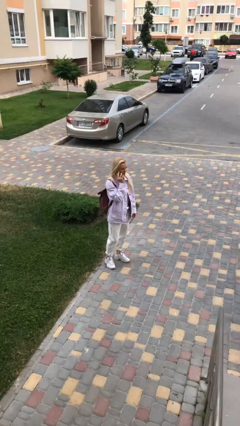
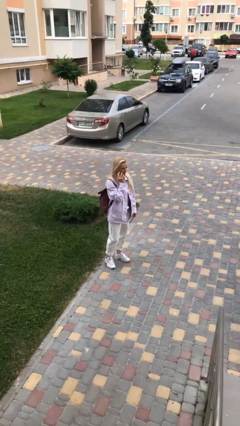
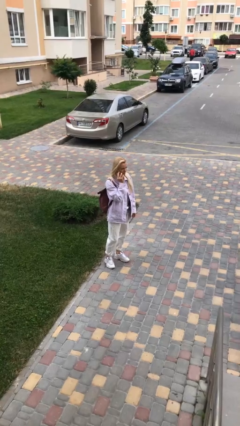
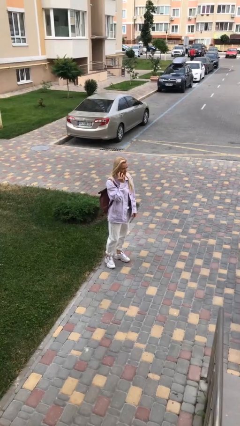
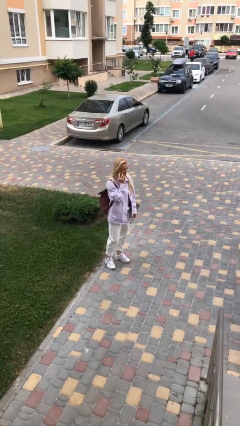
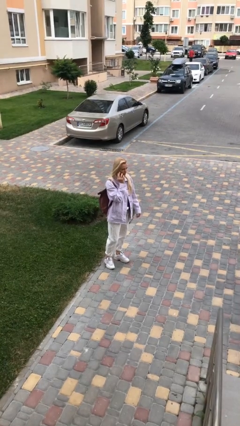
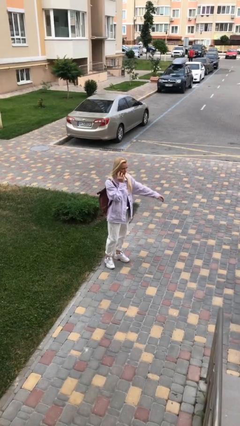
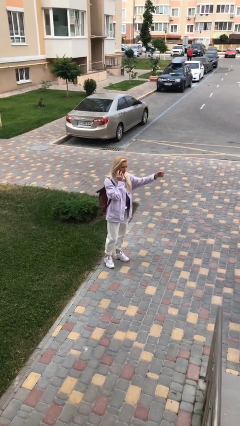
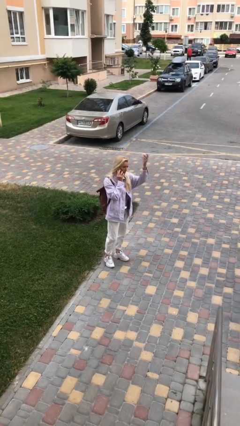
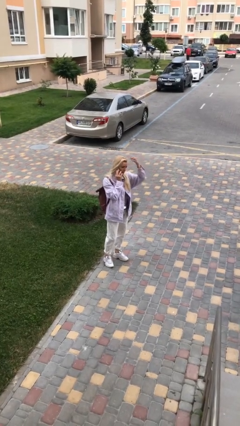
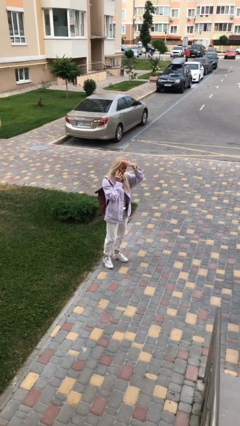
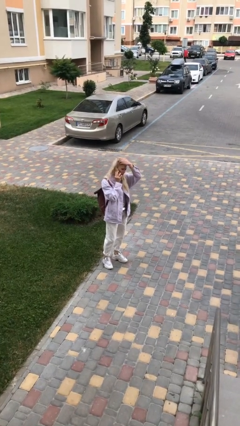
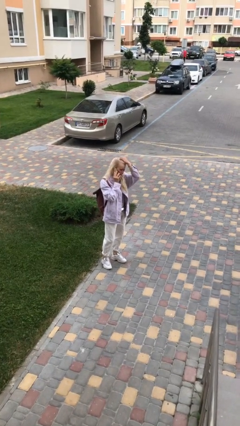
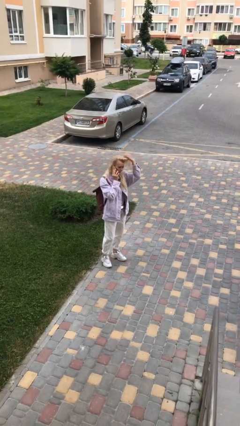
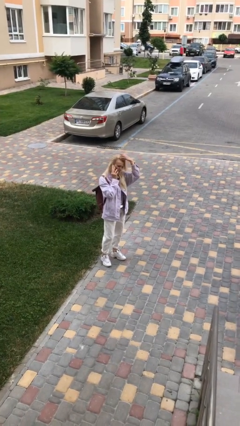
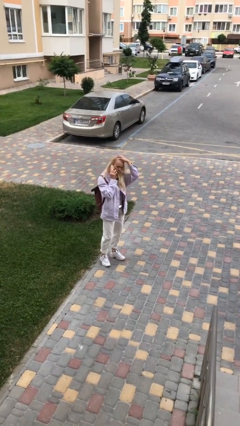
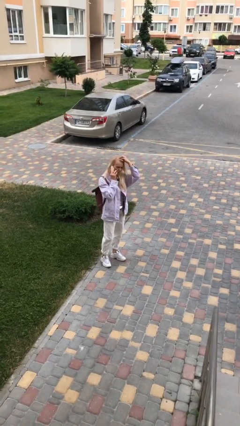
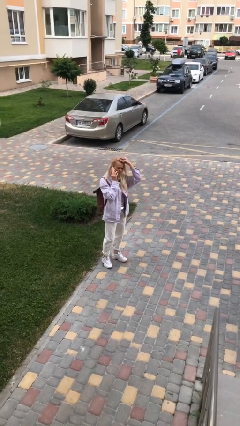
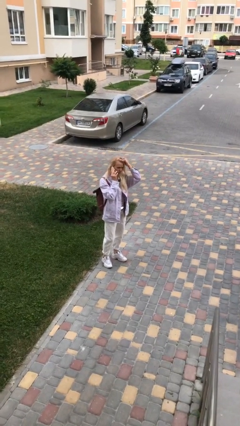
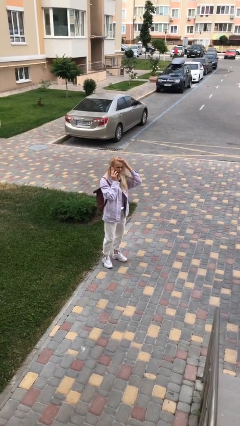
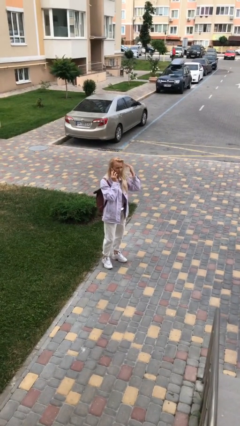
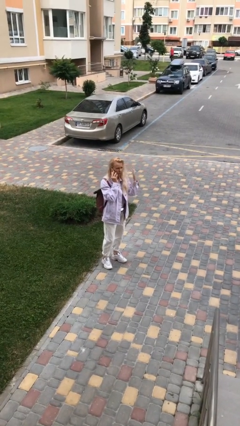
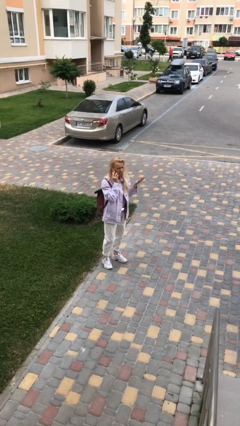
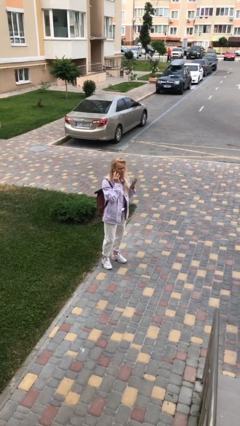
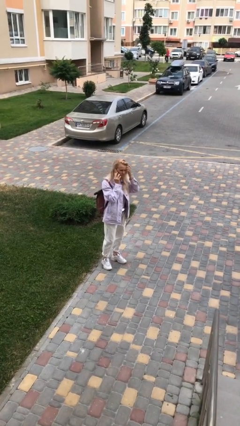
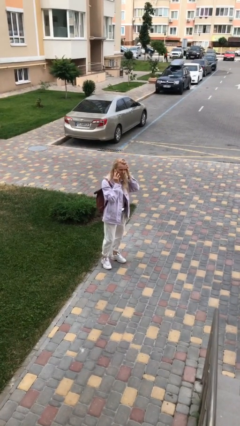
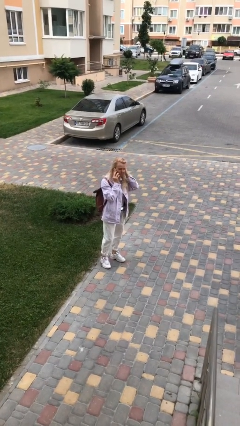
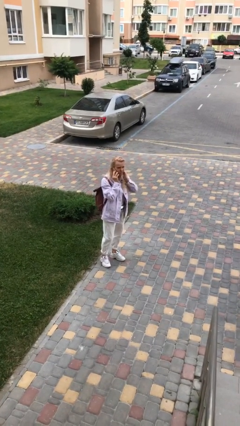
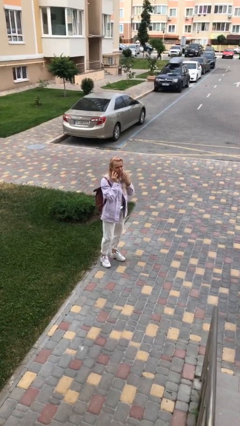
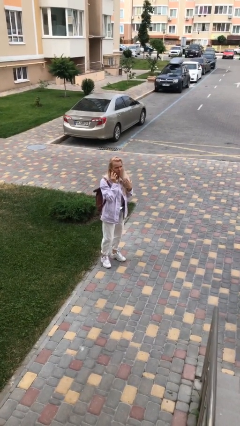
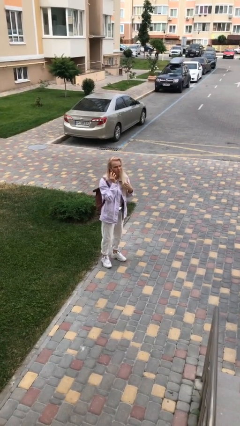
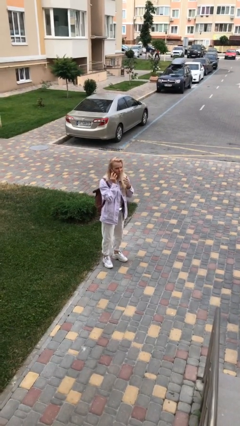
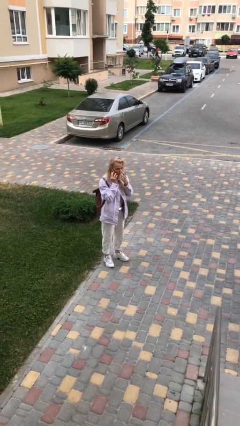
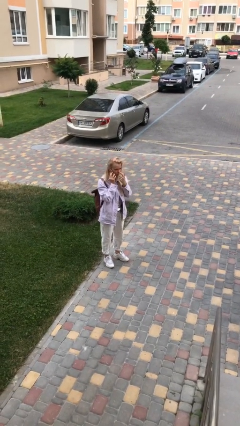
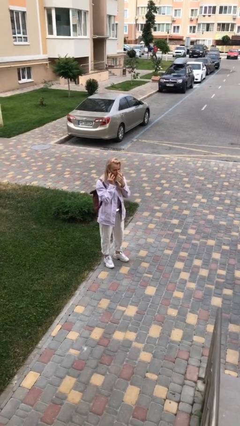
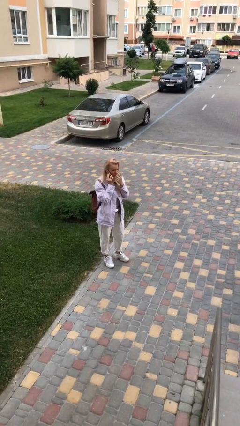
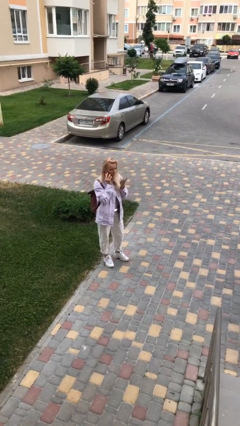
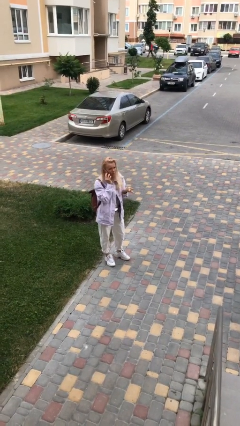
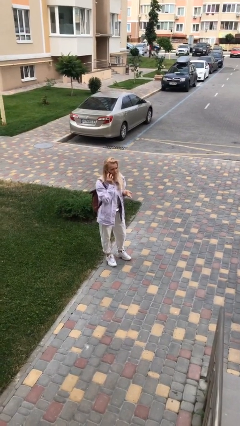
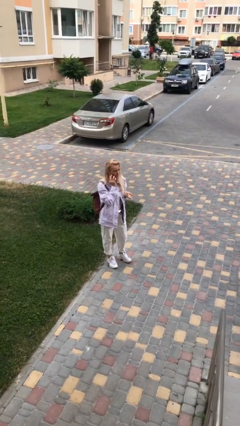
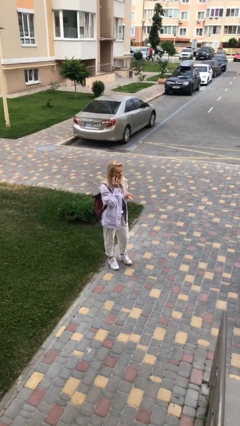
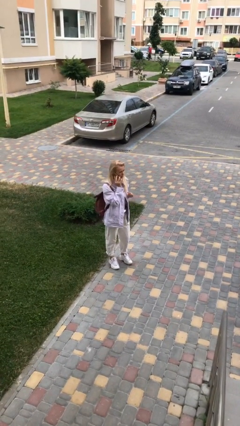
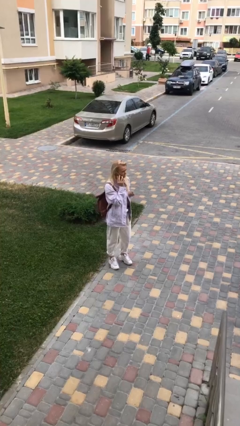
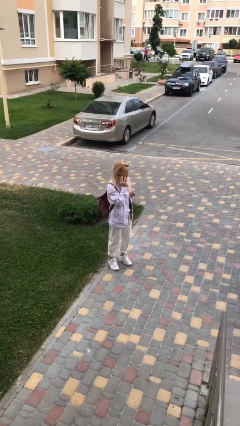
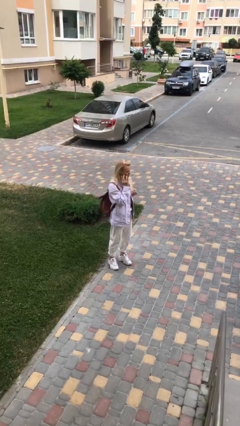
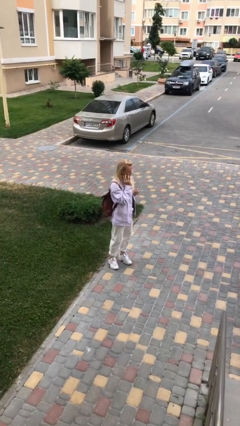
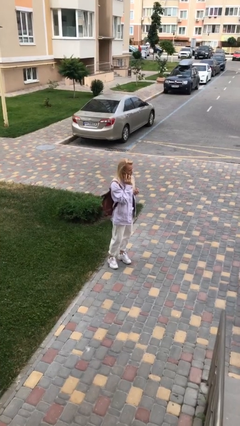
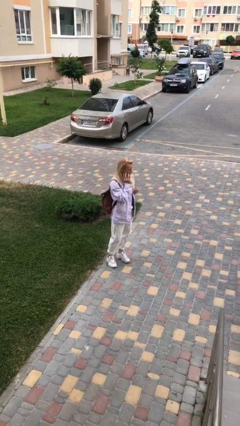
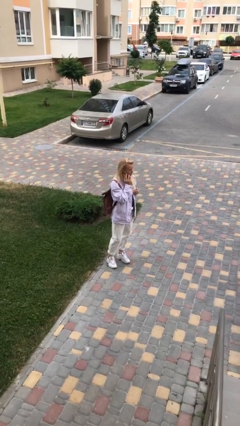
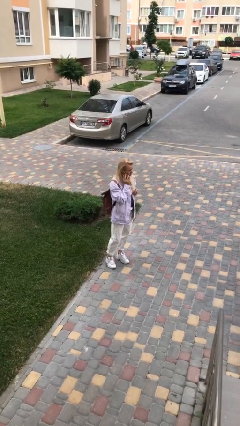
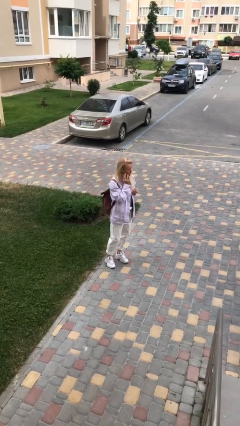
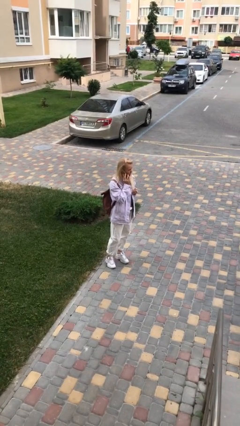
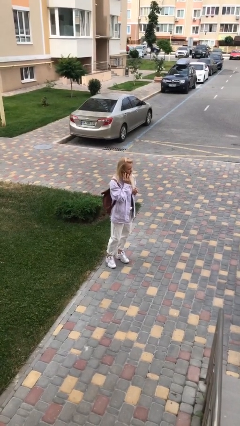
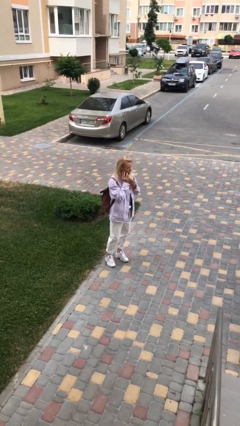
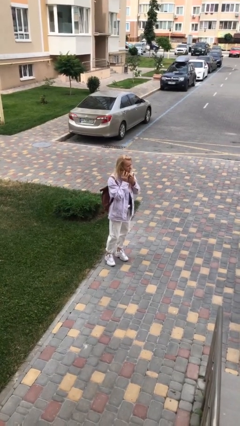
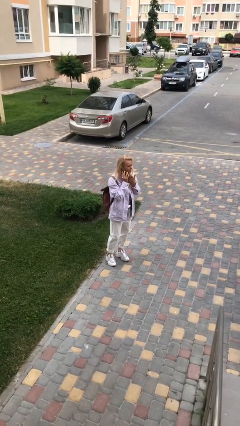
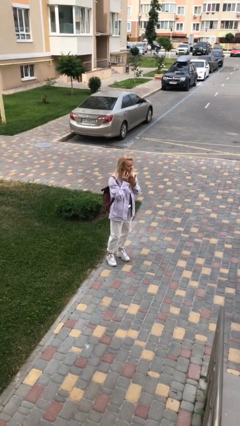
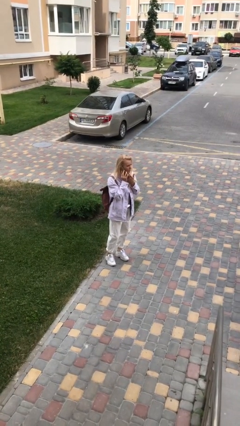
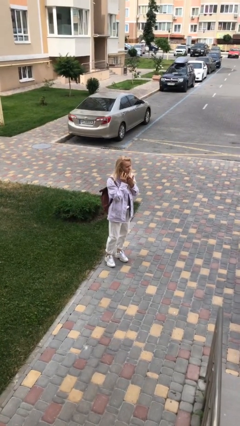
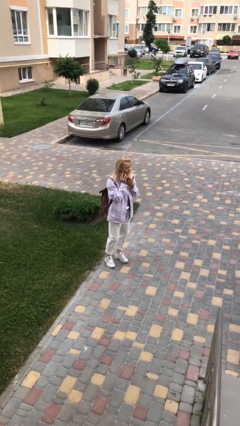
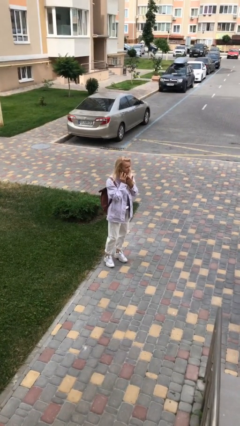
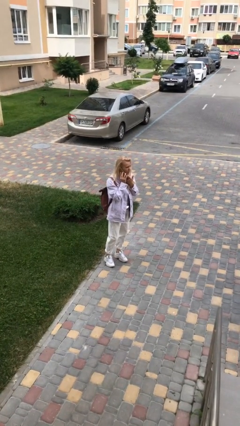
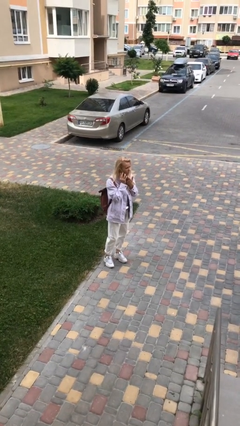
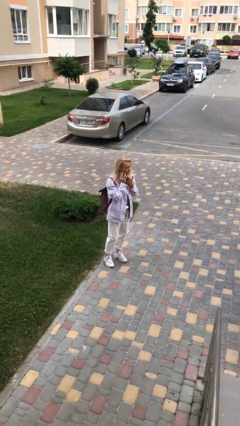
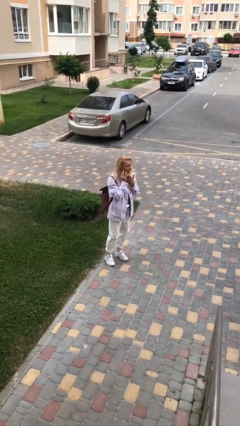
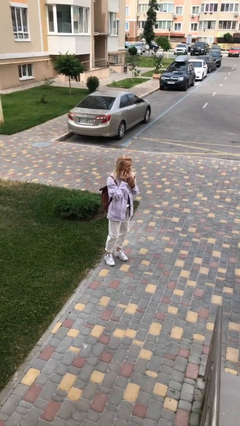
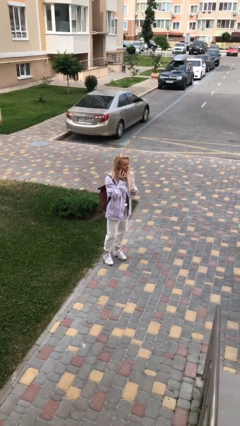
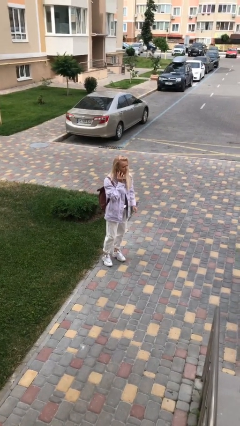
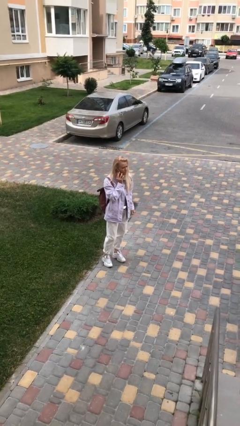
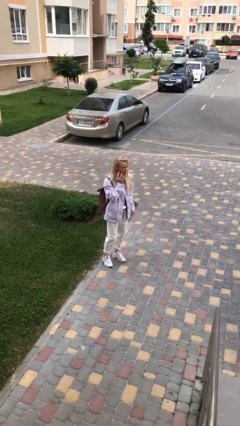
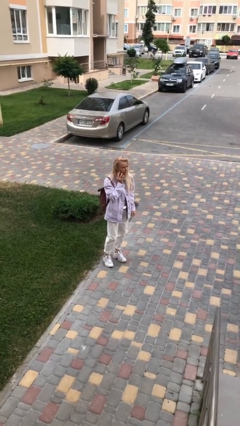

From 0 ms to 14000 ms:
person talks on phone

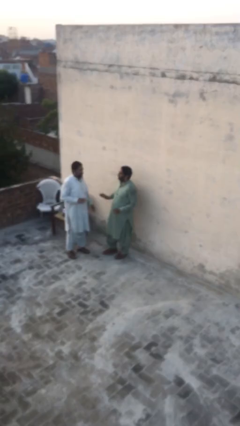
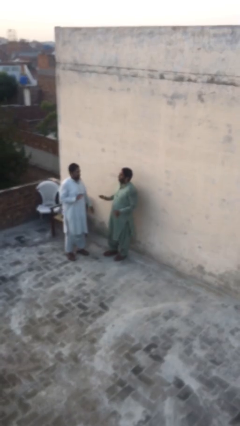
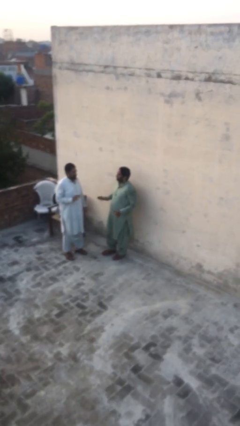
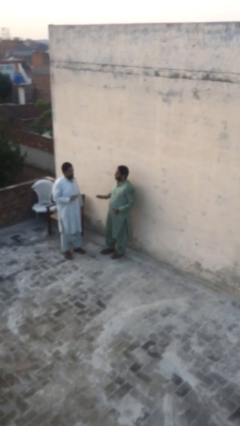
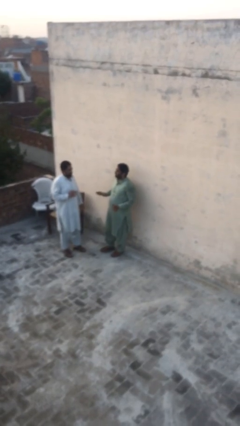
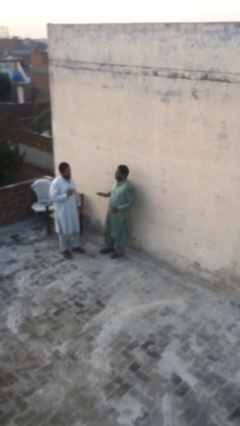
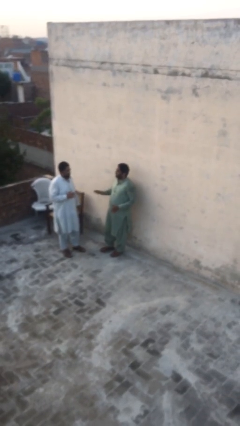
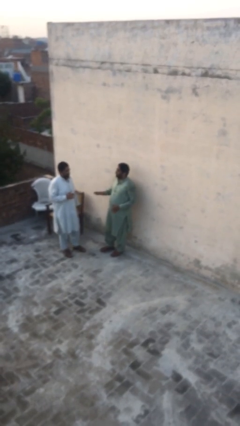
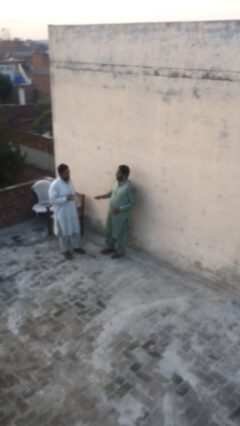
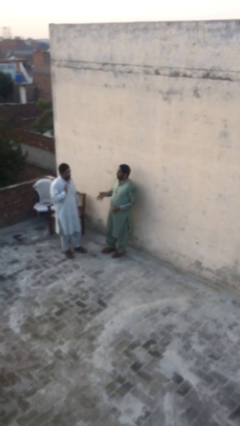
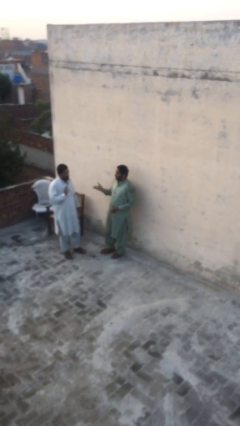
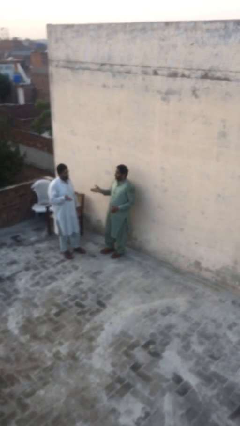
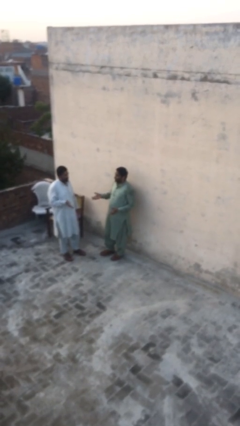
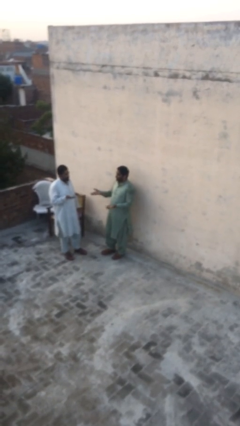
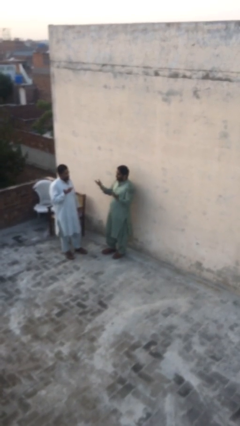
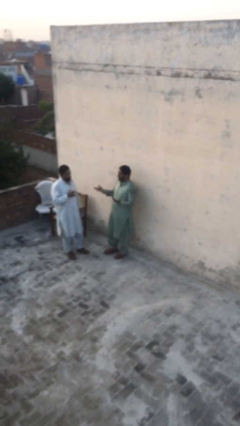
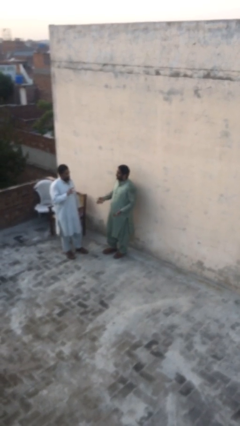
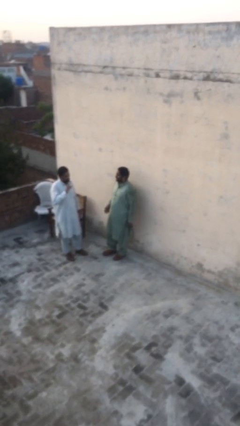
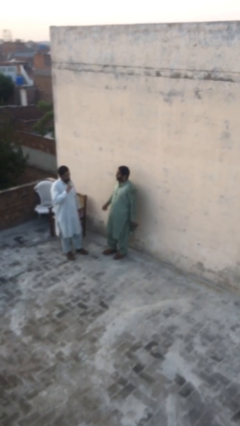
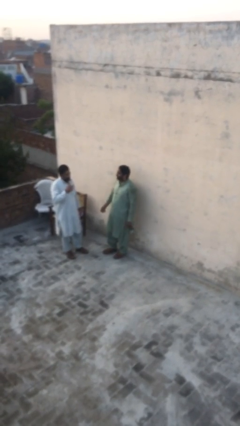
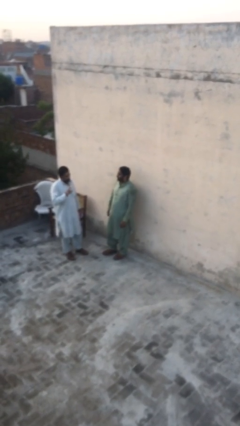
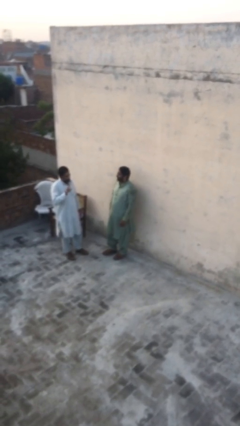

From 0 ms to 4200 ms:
person talks to person
